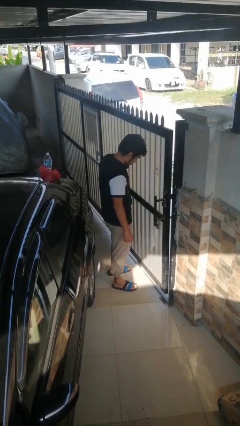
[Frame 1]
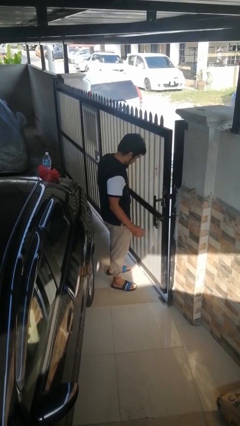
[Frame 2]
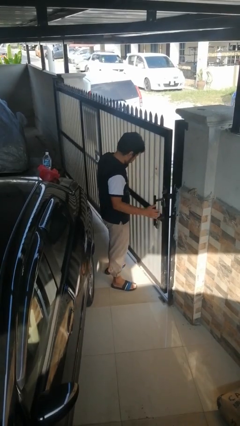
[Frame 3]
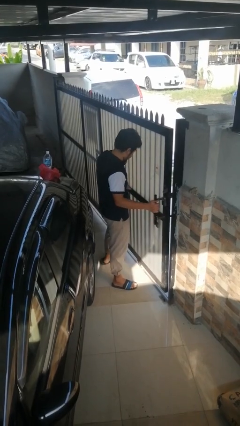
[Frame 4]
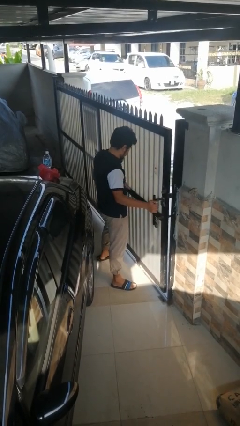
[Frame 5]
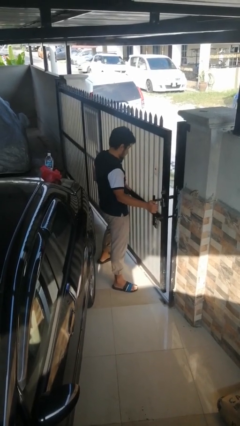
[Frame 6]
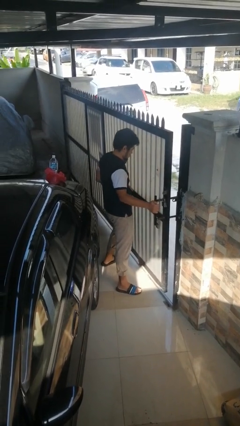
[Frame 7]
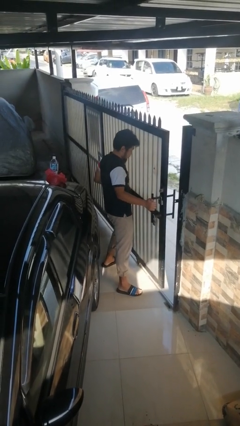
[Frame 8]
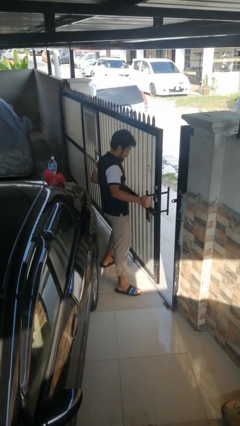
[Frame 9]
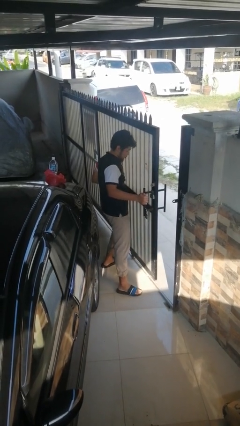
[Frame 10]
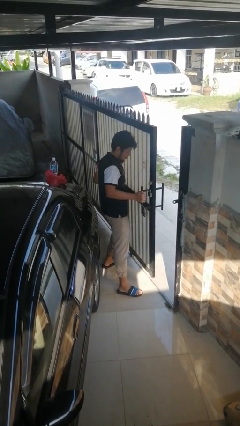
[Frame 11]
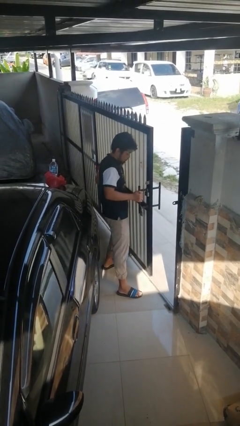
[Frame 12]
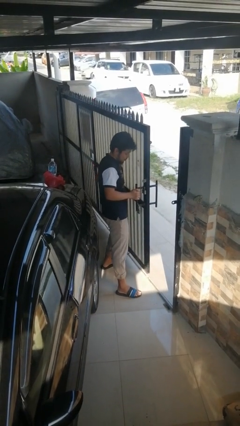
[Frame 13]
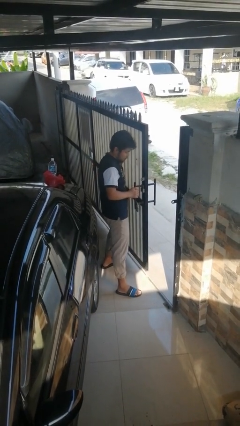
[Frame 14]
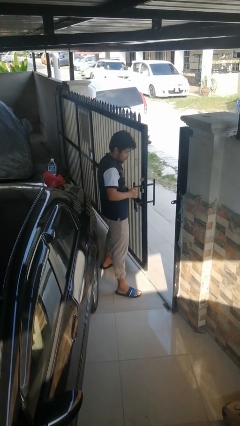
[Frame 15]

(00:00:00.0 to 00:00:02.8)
person opens sliding door

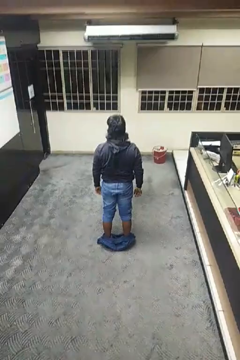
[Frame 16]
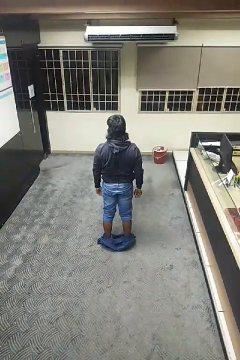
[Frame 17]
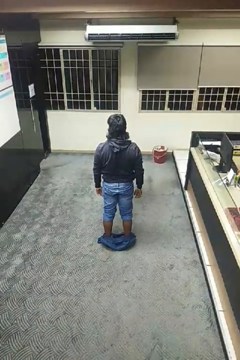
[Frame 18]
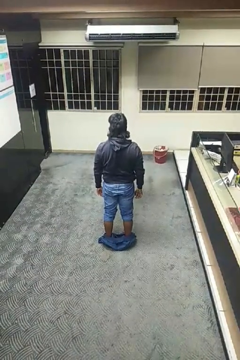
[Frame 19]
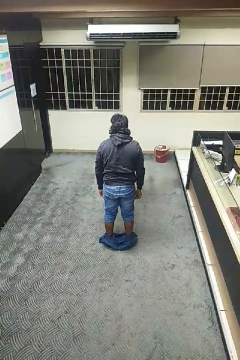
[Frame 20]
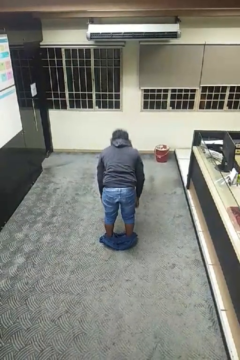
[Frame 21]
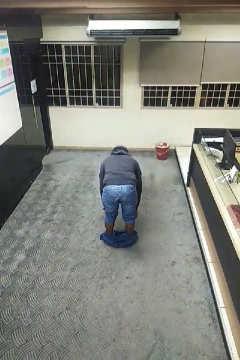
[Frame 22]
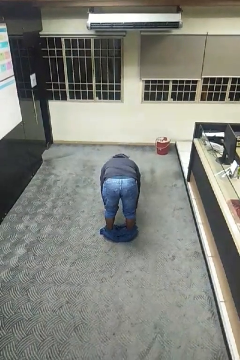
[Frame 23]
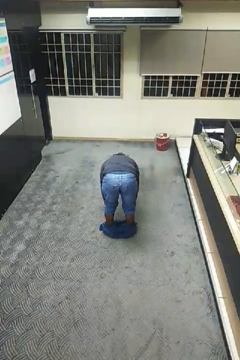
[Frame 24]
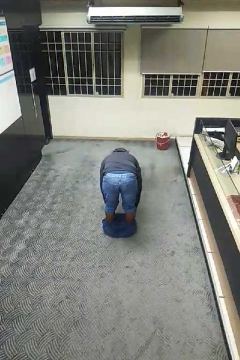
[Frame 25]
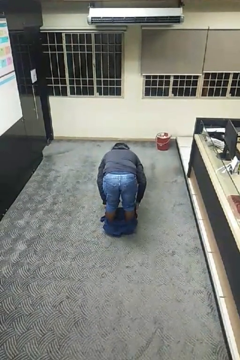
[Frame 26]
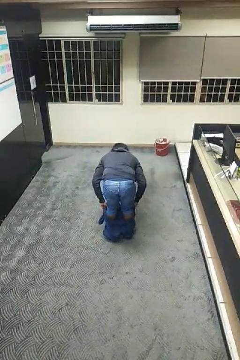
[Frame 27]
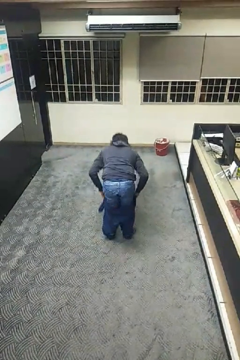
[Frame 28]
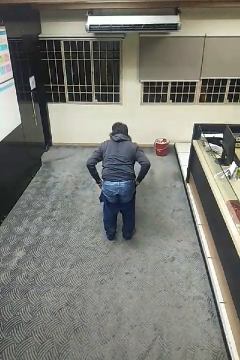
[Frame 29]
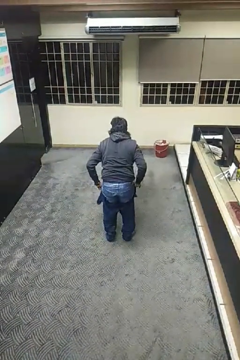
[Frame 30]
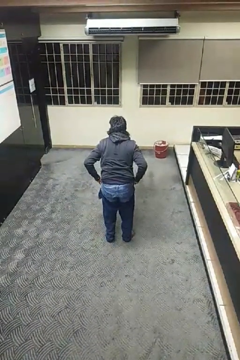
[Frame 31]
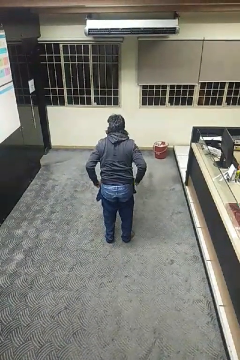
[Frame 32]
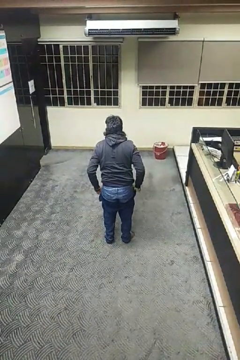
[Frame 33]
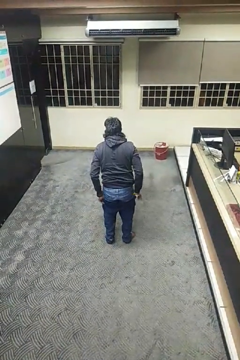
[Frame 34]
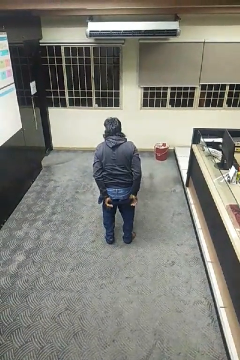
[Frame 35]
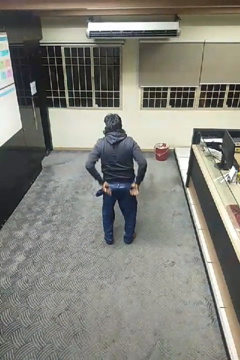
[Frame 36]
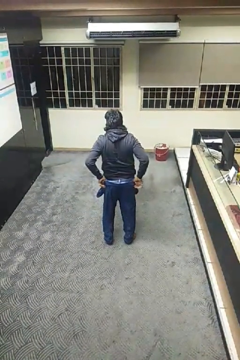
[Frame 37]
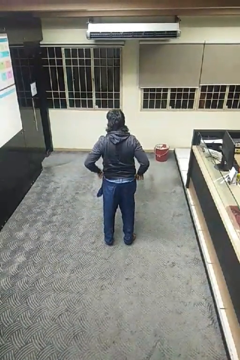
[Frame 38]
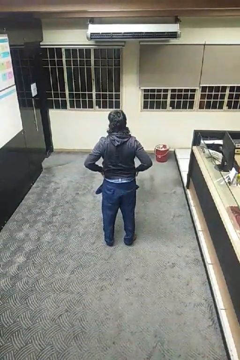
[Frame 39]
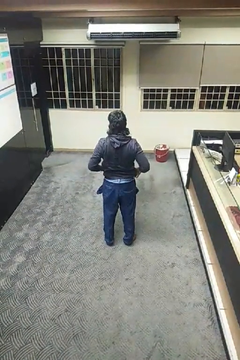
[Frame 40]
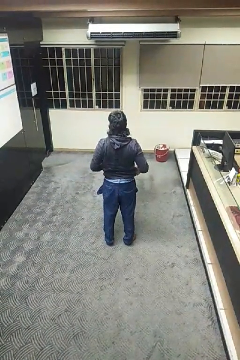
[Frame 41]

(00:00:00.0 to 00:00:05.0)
person puts on pants

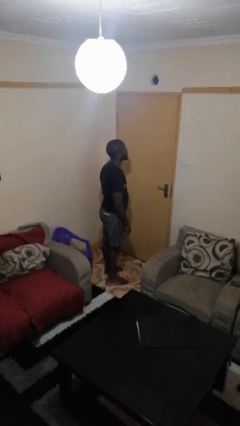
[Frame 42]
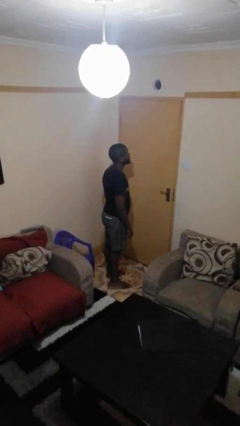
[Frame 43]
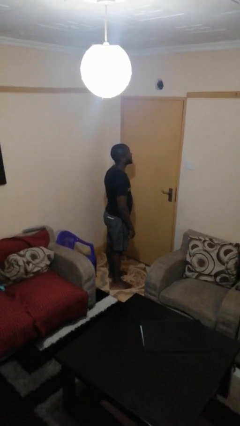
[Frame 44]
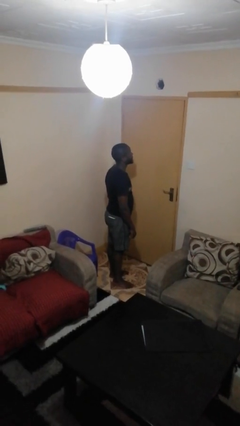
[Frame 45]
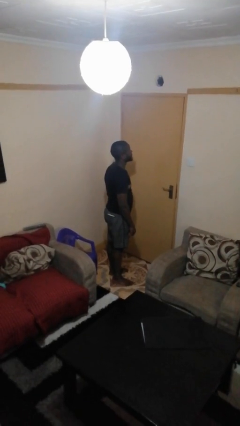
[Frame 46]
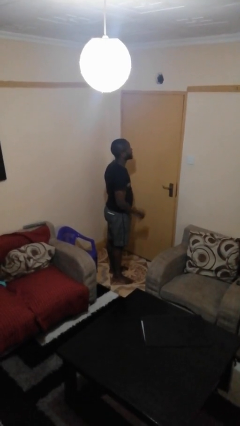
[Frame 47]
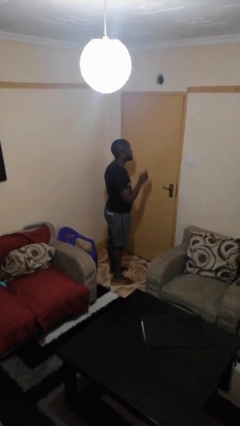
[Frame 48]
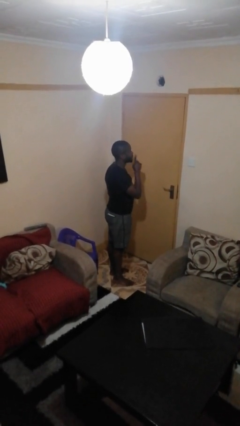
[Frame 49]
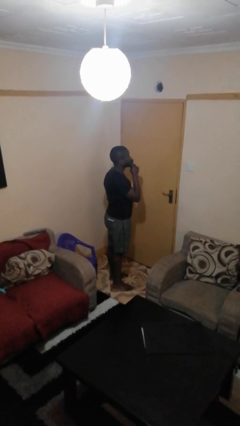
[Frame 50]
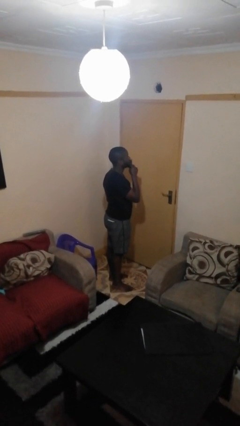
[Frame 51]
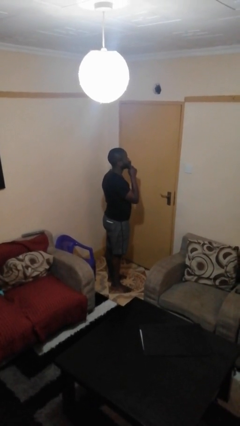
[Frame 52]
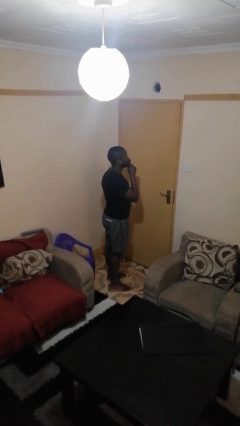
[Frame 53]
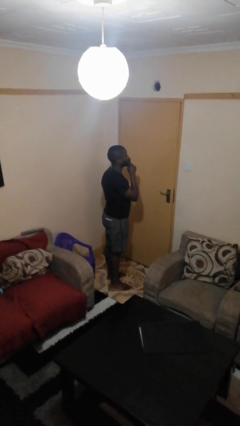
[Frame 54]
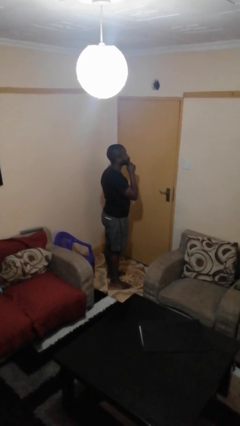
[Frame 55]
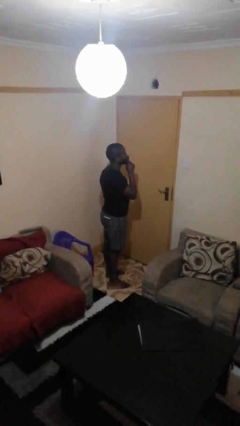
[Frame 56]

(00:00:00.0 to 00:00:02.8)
person gestures be quiet

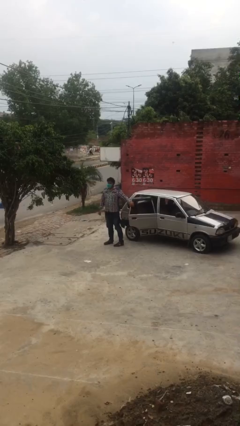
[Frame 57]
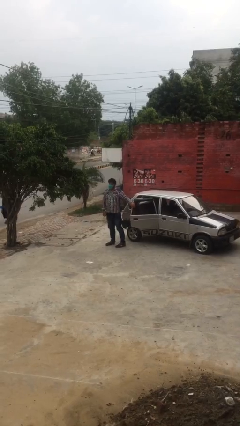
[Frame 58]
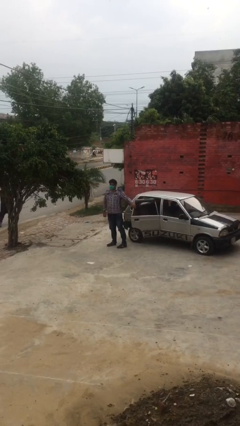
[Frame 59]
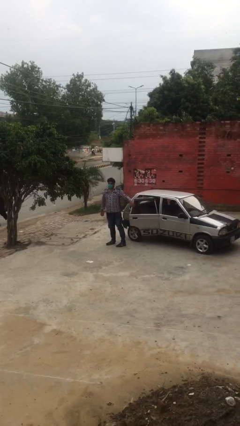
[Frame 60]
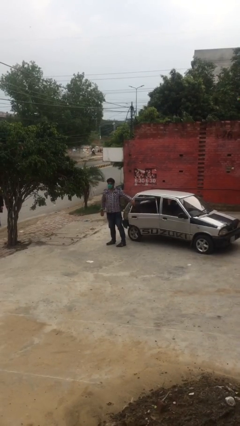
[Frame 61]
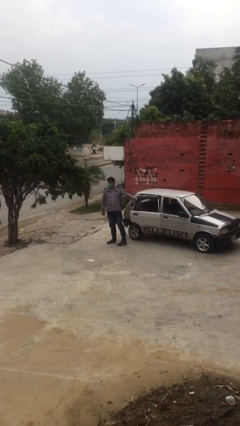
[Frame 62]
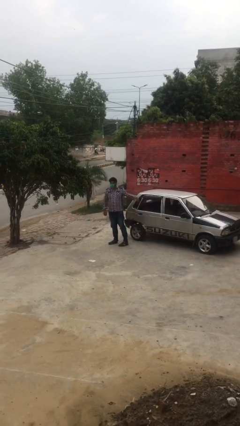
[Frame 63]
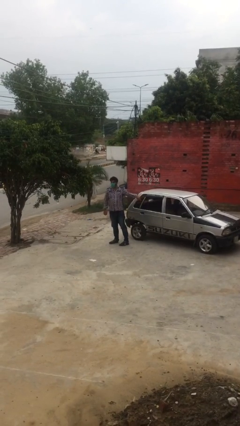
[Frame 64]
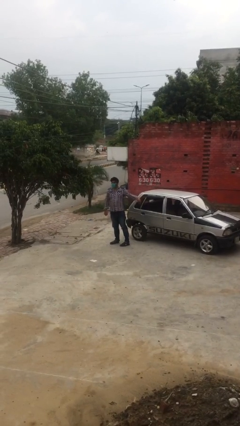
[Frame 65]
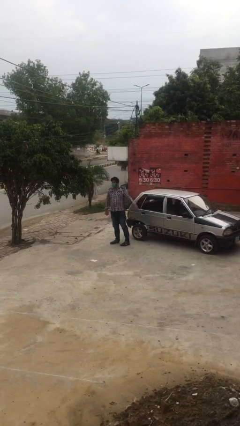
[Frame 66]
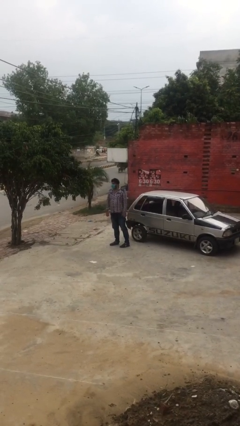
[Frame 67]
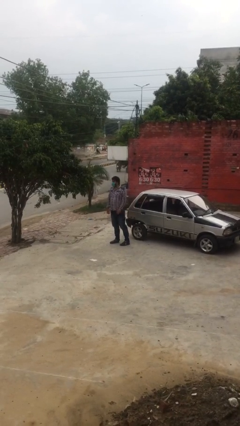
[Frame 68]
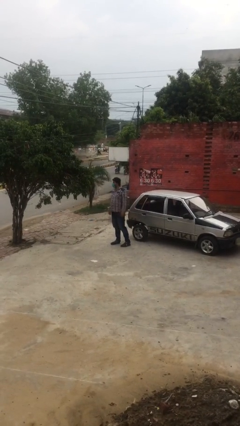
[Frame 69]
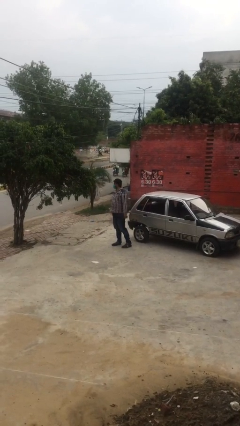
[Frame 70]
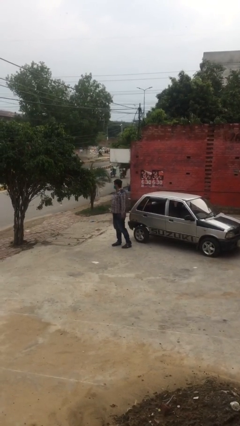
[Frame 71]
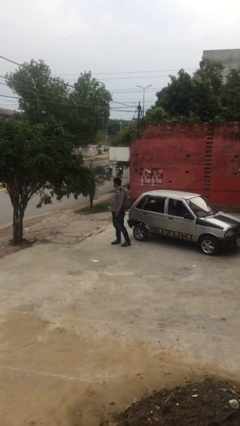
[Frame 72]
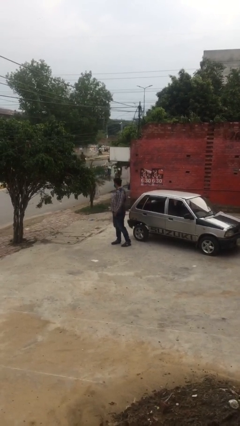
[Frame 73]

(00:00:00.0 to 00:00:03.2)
person closes car door

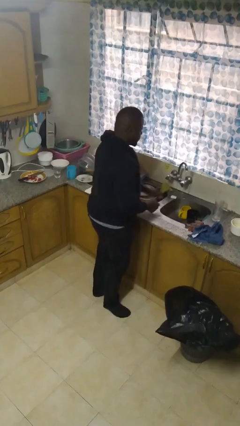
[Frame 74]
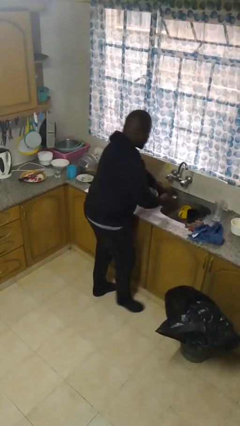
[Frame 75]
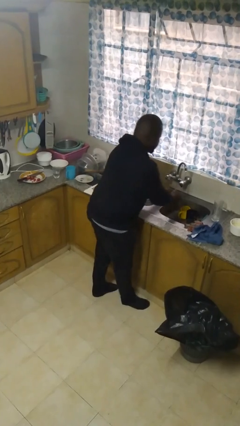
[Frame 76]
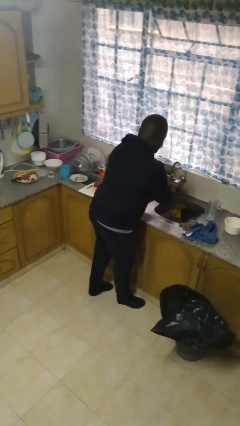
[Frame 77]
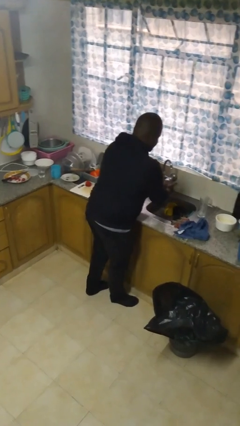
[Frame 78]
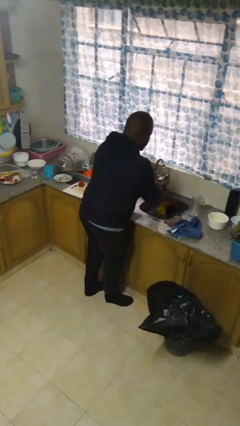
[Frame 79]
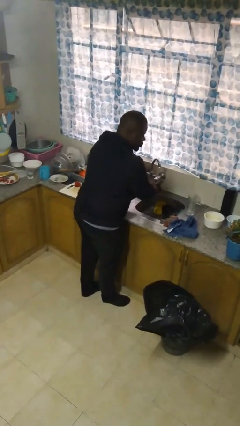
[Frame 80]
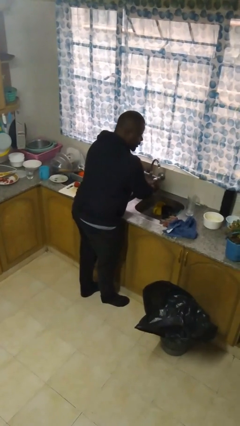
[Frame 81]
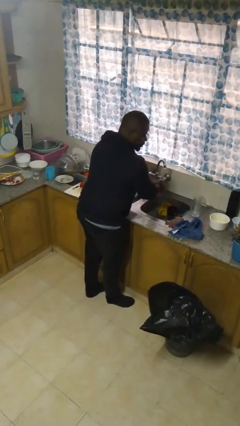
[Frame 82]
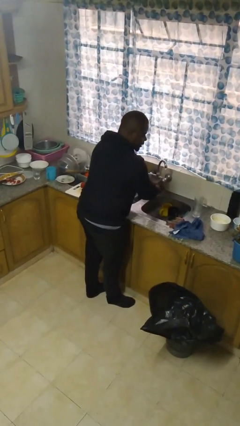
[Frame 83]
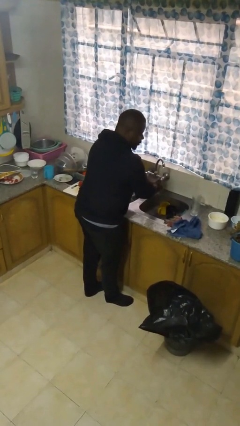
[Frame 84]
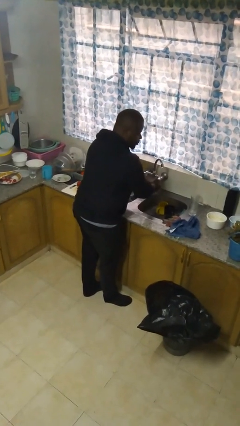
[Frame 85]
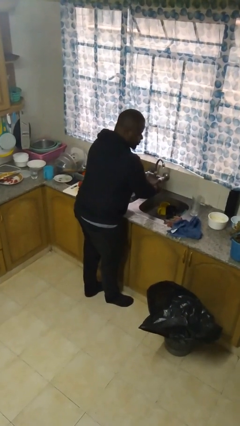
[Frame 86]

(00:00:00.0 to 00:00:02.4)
person washes hands

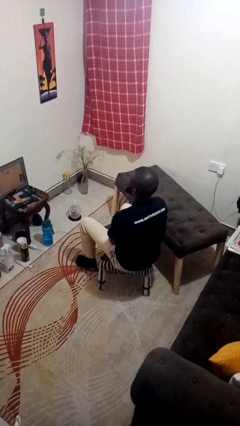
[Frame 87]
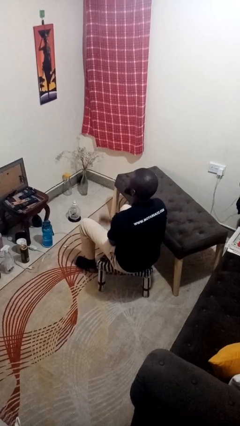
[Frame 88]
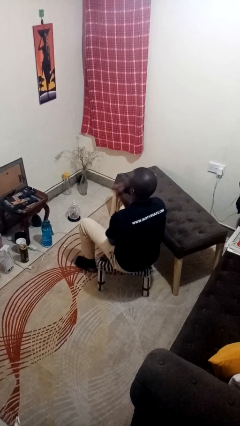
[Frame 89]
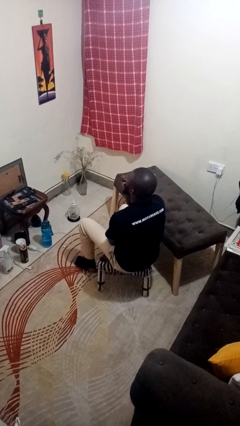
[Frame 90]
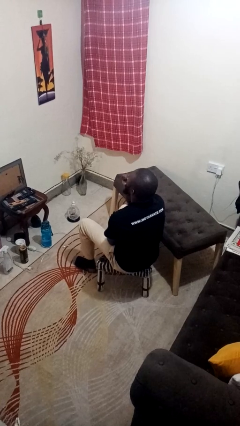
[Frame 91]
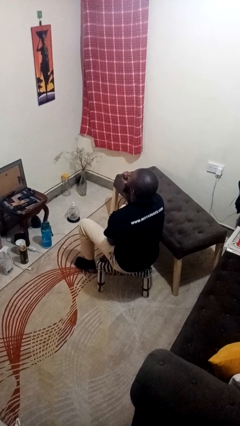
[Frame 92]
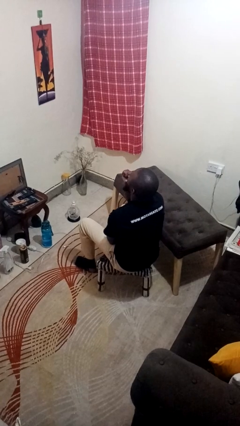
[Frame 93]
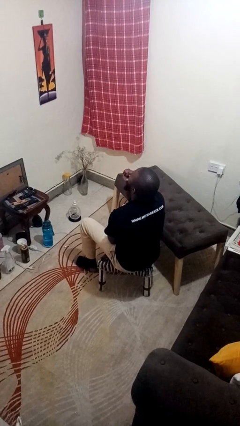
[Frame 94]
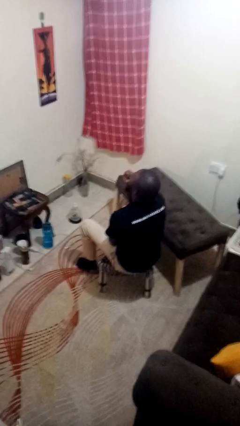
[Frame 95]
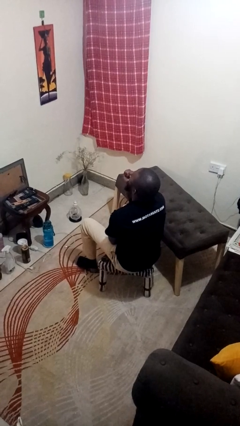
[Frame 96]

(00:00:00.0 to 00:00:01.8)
person yawns

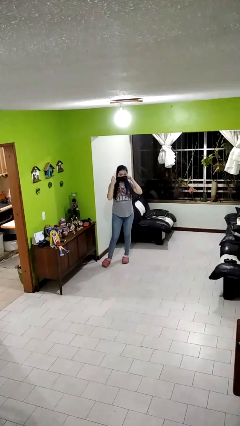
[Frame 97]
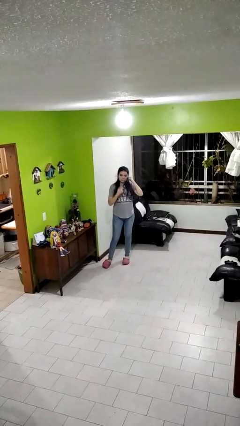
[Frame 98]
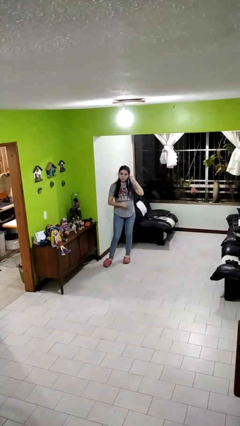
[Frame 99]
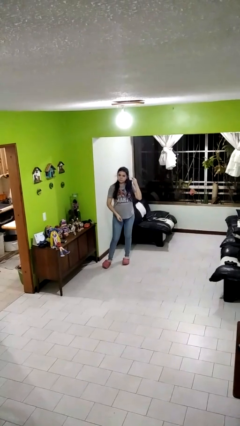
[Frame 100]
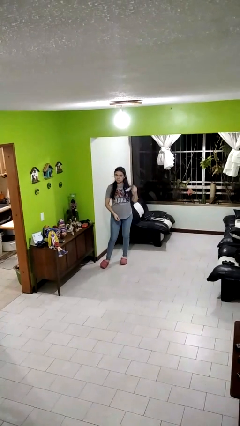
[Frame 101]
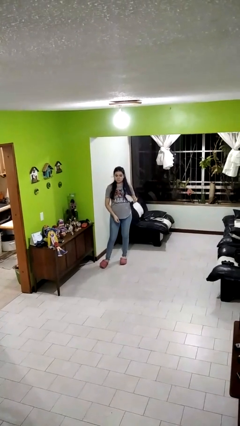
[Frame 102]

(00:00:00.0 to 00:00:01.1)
person takes off facemask
